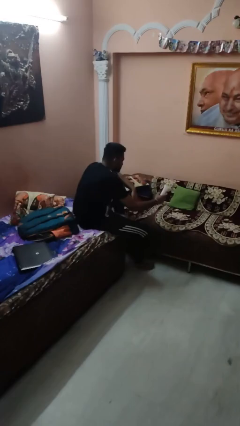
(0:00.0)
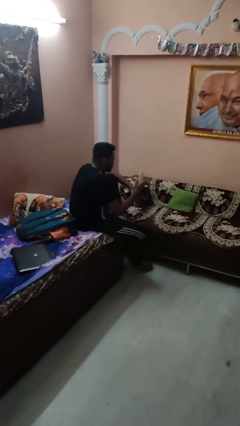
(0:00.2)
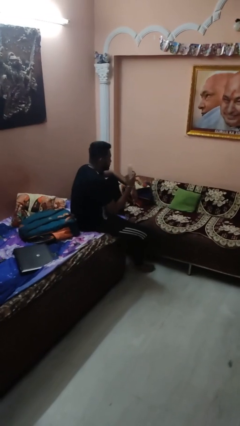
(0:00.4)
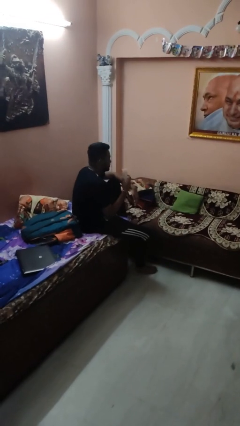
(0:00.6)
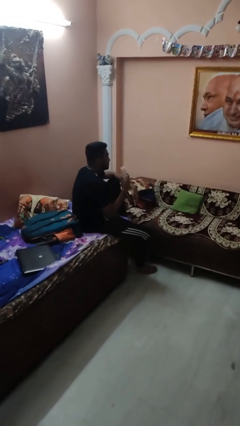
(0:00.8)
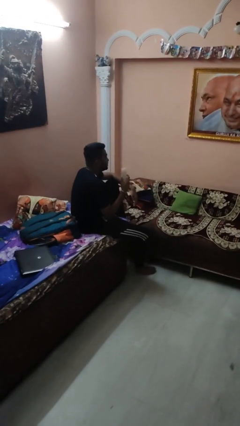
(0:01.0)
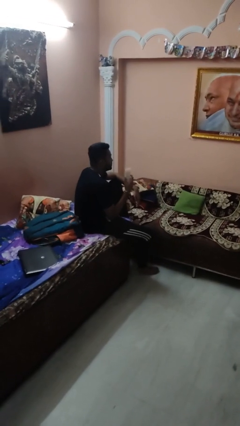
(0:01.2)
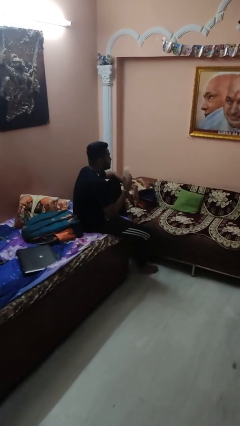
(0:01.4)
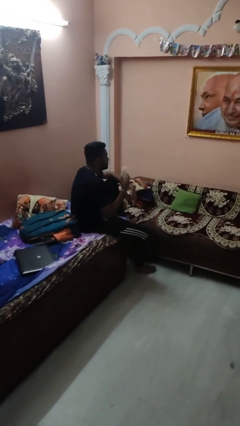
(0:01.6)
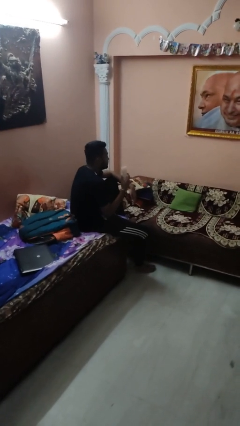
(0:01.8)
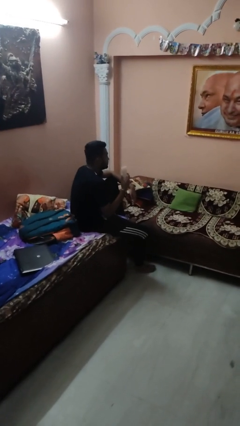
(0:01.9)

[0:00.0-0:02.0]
person picks up object from couch

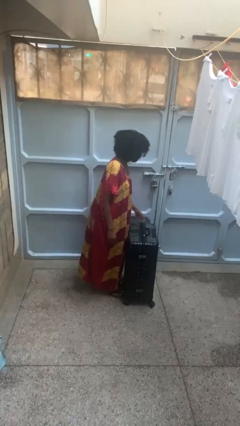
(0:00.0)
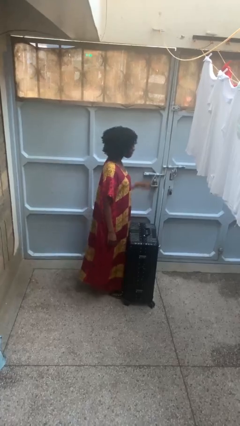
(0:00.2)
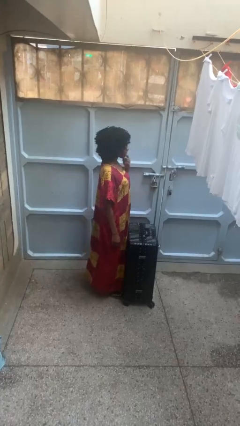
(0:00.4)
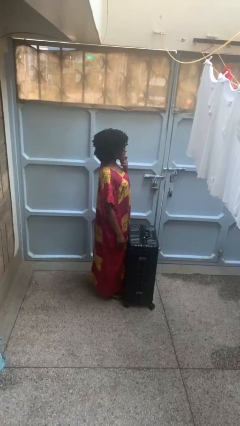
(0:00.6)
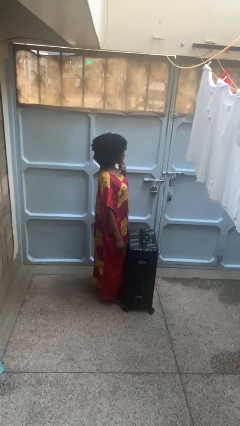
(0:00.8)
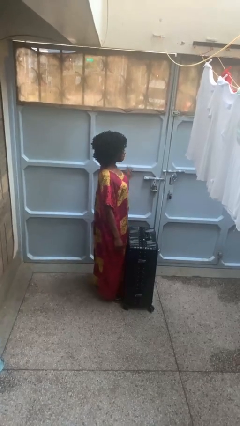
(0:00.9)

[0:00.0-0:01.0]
person closes suitcase

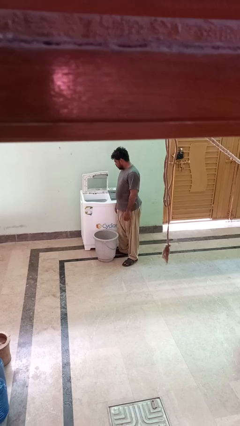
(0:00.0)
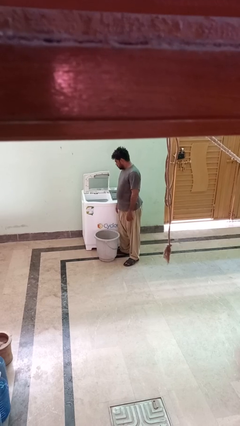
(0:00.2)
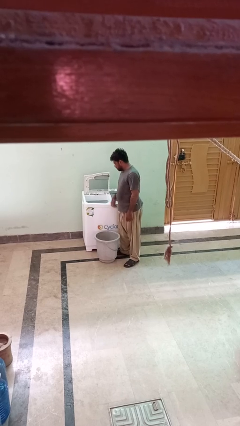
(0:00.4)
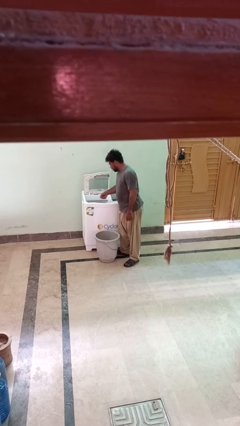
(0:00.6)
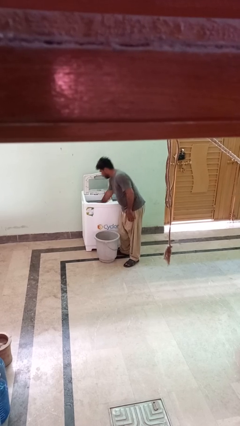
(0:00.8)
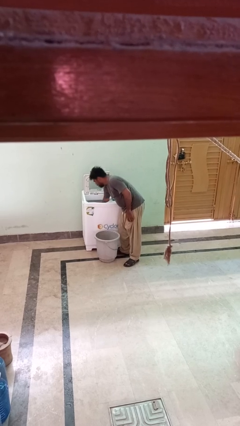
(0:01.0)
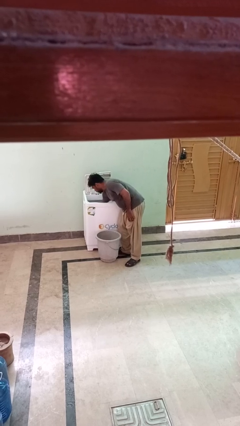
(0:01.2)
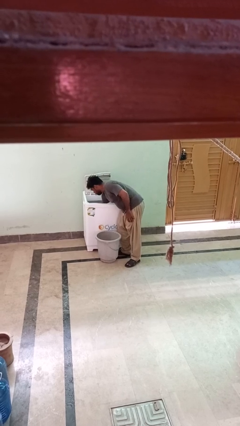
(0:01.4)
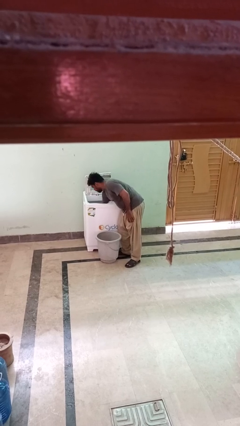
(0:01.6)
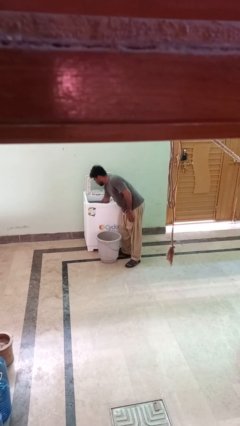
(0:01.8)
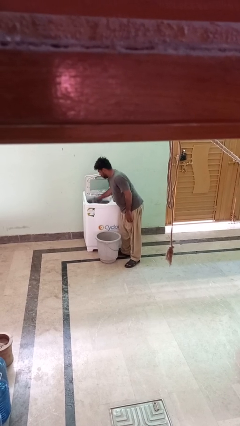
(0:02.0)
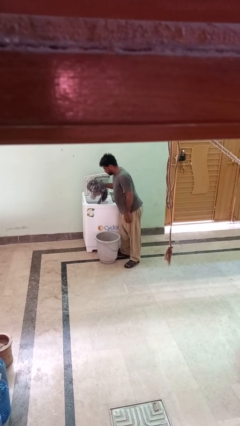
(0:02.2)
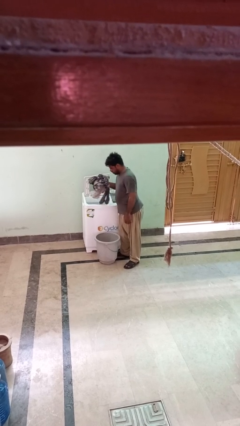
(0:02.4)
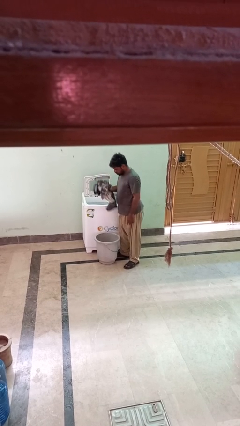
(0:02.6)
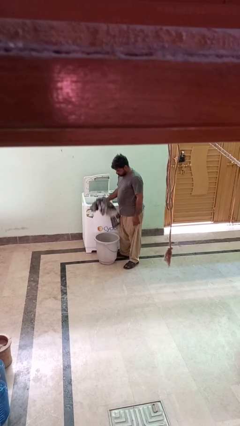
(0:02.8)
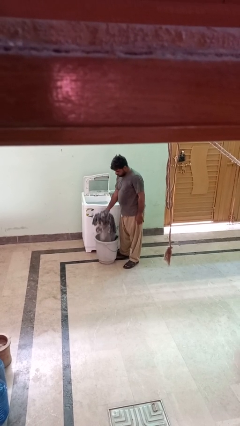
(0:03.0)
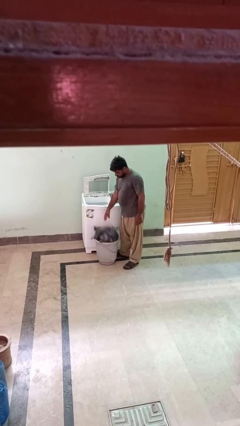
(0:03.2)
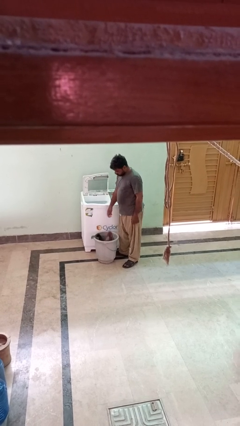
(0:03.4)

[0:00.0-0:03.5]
person loads clotheswasher

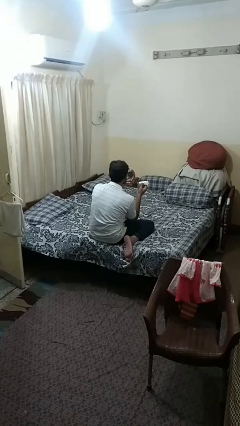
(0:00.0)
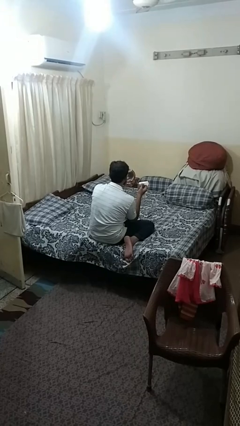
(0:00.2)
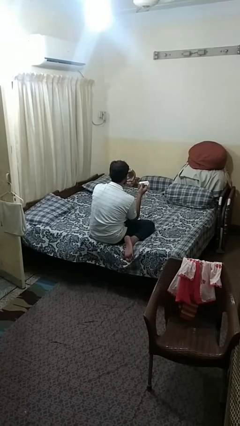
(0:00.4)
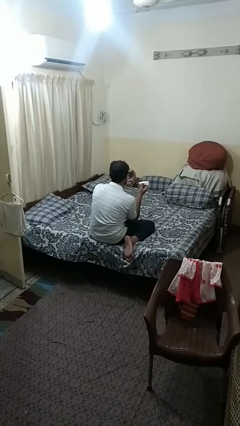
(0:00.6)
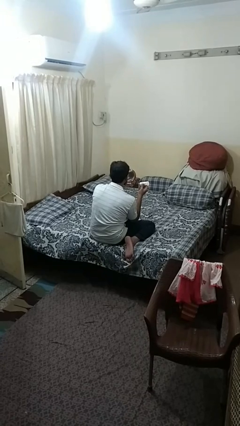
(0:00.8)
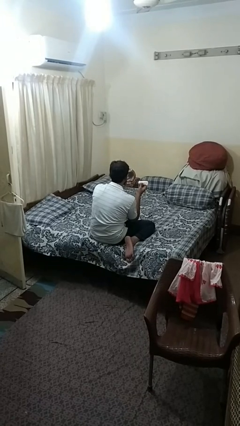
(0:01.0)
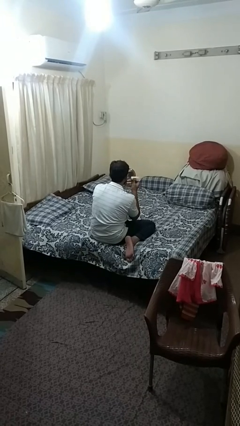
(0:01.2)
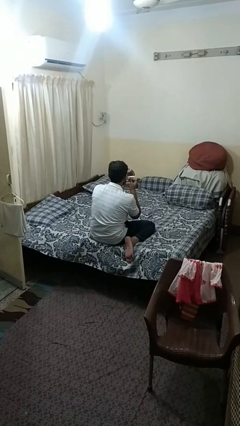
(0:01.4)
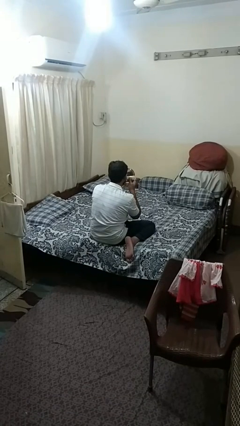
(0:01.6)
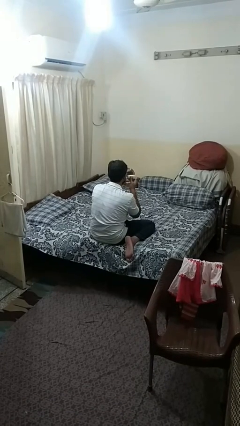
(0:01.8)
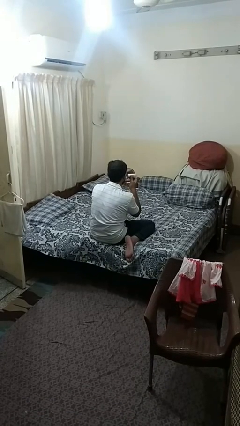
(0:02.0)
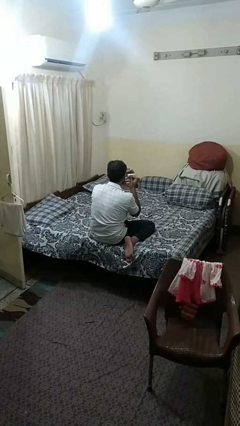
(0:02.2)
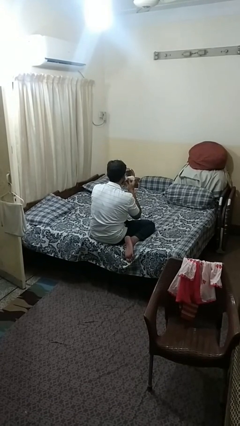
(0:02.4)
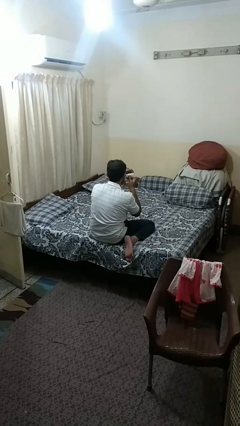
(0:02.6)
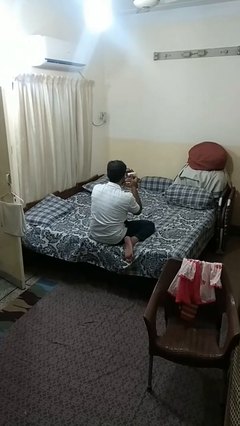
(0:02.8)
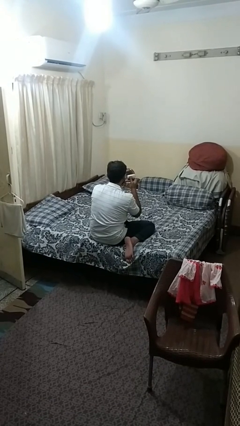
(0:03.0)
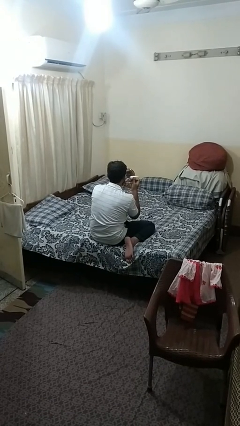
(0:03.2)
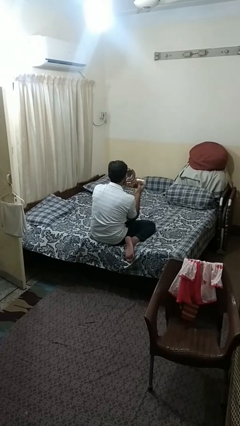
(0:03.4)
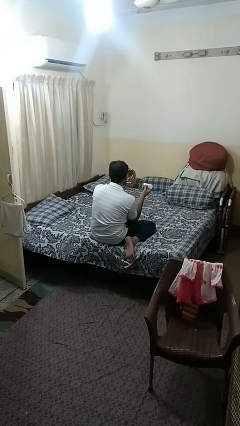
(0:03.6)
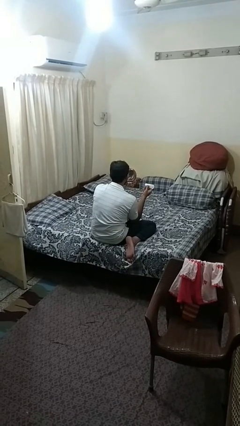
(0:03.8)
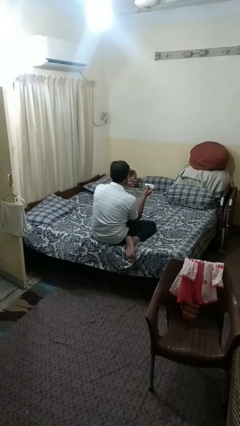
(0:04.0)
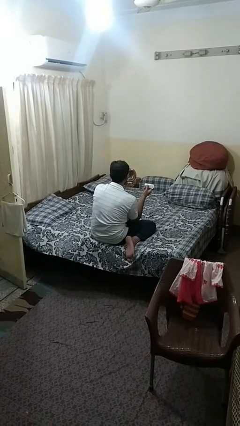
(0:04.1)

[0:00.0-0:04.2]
person applies foundation makeup

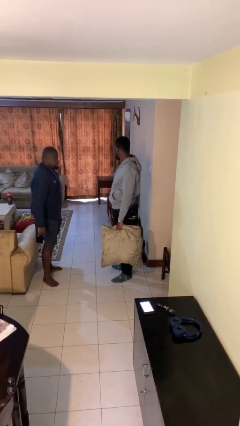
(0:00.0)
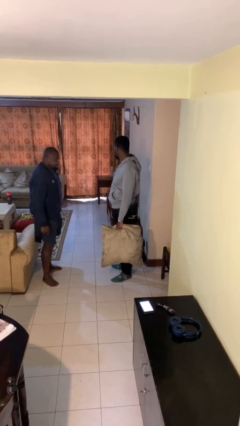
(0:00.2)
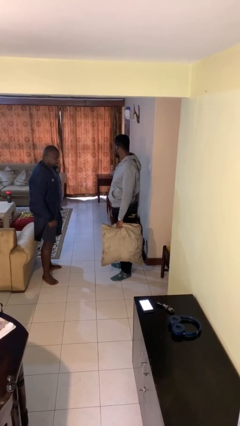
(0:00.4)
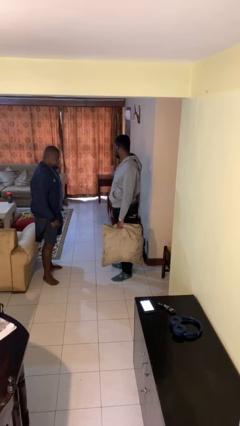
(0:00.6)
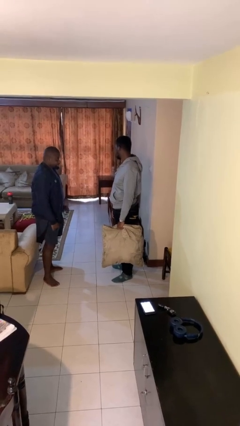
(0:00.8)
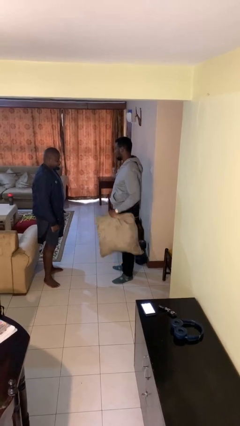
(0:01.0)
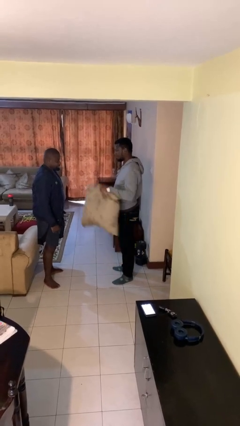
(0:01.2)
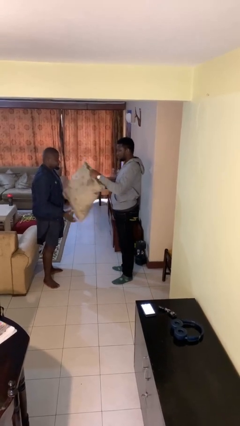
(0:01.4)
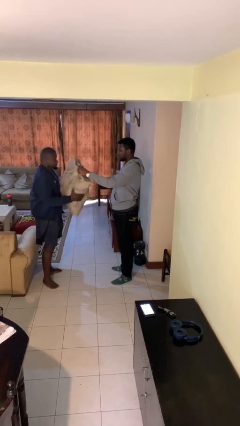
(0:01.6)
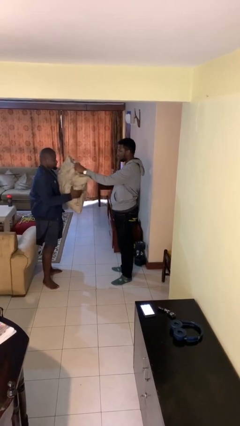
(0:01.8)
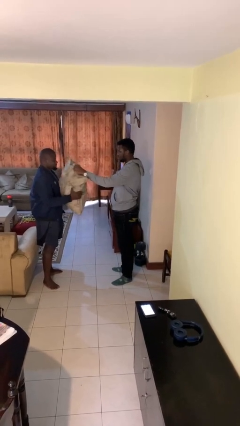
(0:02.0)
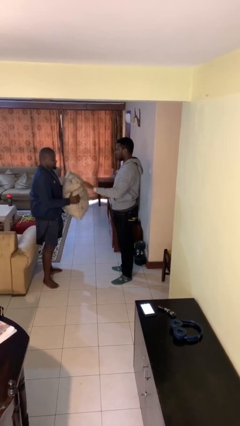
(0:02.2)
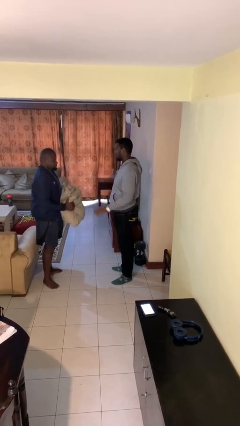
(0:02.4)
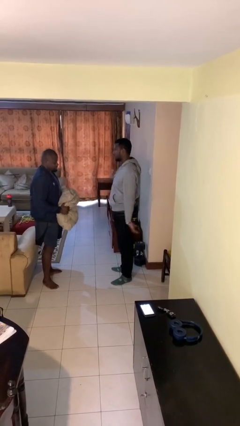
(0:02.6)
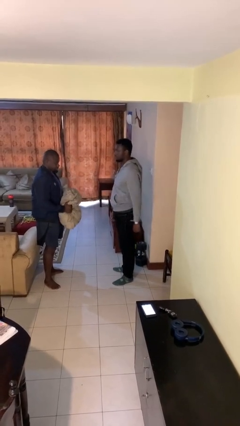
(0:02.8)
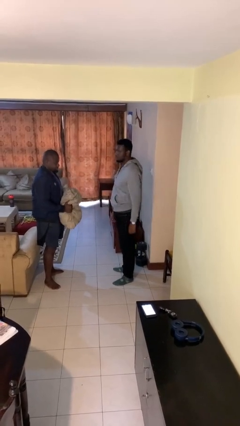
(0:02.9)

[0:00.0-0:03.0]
person transfers object to person

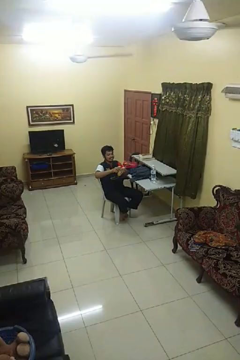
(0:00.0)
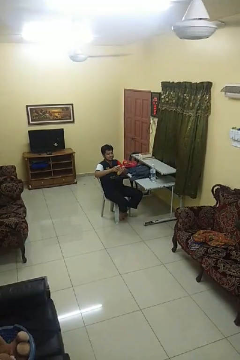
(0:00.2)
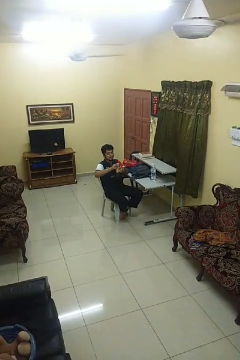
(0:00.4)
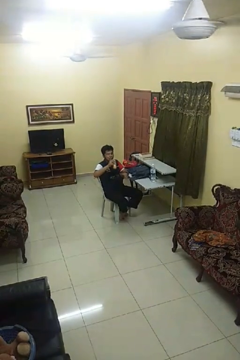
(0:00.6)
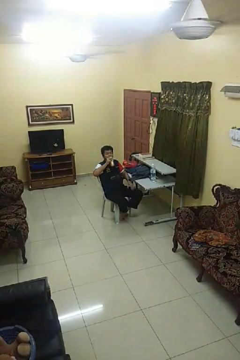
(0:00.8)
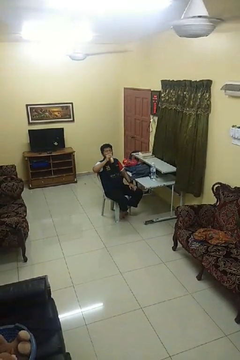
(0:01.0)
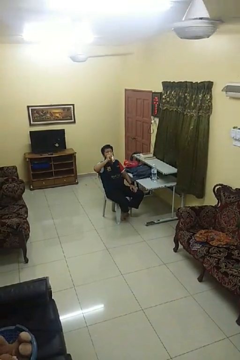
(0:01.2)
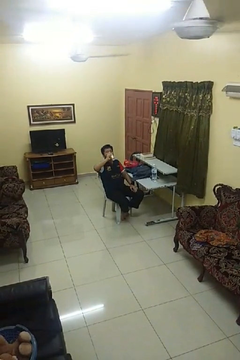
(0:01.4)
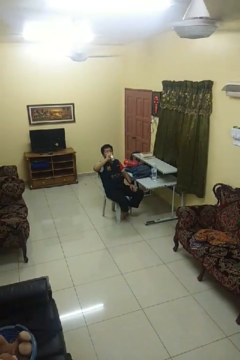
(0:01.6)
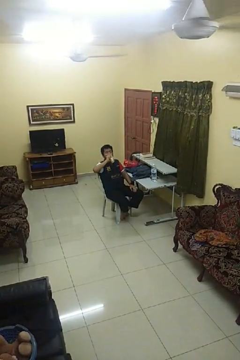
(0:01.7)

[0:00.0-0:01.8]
person drinks from beverage can

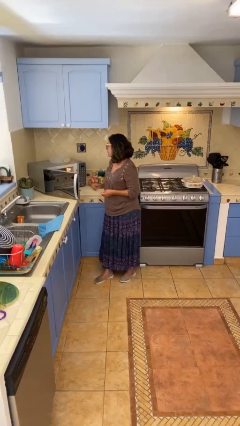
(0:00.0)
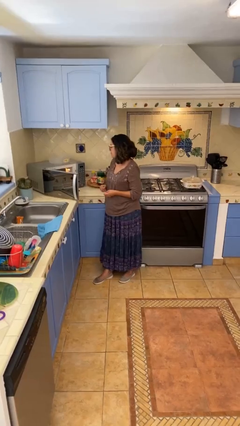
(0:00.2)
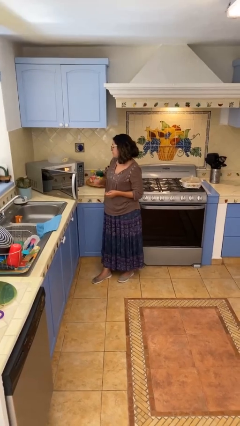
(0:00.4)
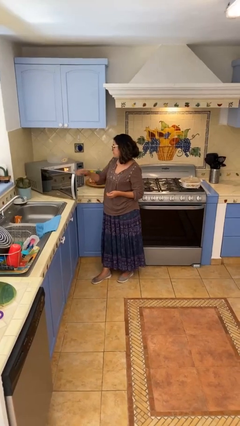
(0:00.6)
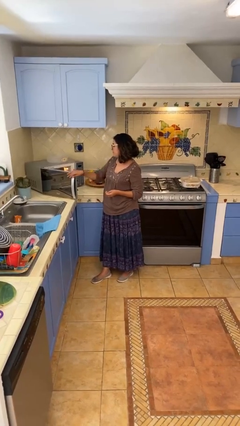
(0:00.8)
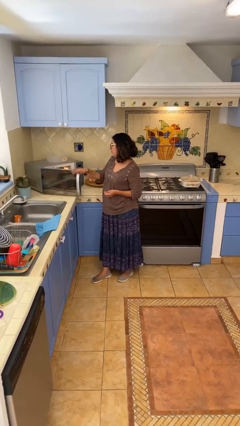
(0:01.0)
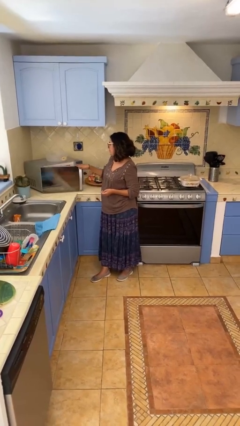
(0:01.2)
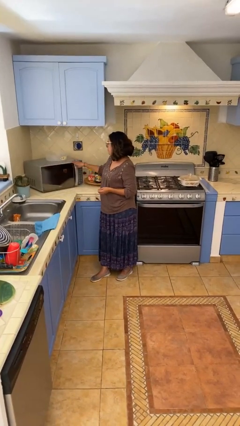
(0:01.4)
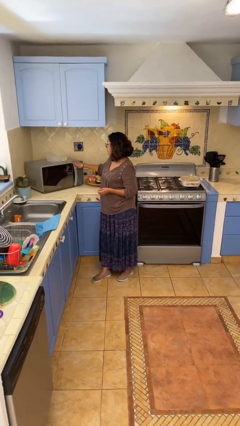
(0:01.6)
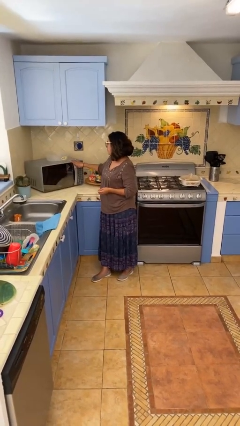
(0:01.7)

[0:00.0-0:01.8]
person closes microwave

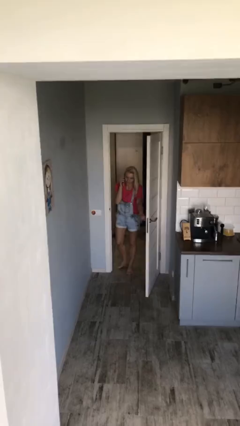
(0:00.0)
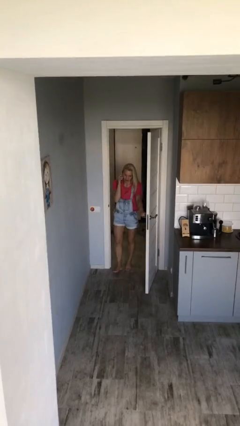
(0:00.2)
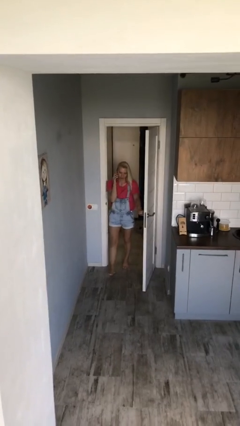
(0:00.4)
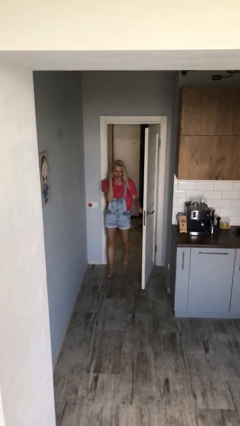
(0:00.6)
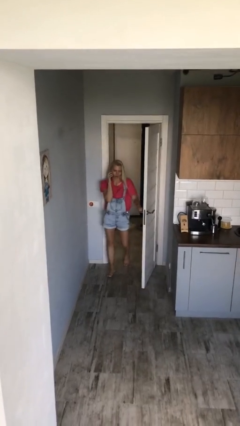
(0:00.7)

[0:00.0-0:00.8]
person enters scene through structure
